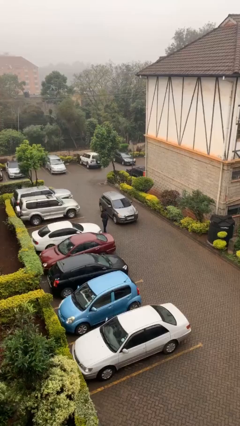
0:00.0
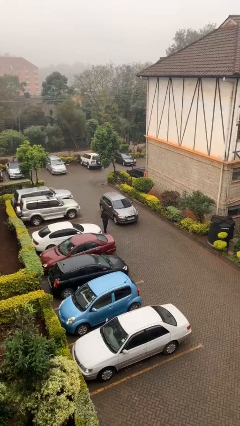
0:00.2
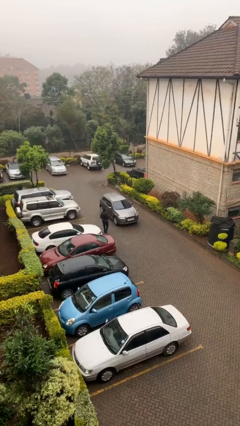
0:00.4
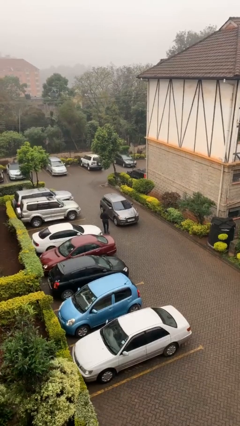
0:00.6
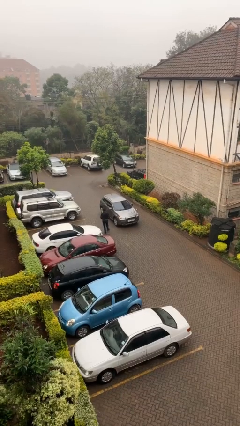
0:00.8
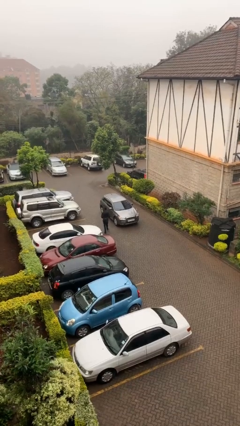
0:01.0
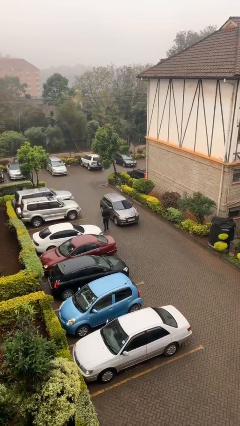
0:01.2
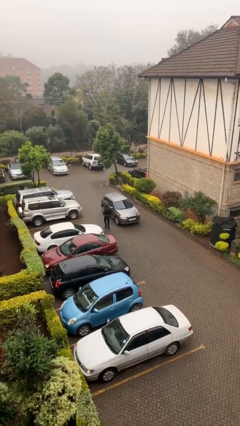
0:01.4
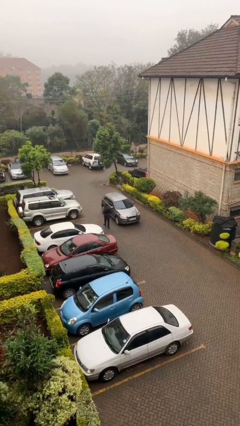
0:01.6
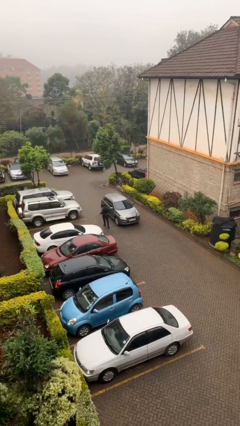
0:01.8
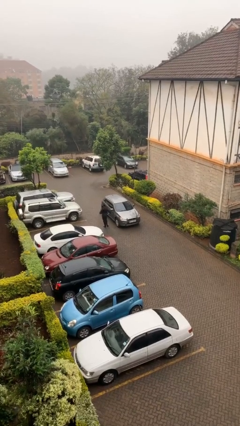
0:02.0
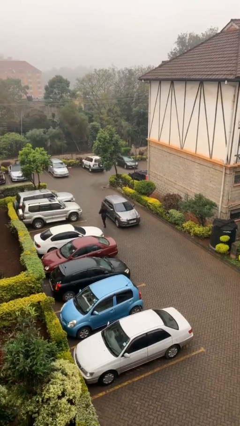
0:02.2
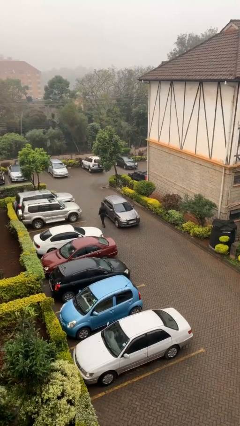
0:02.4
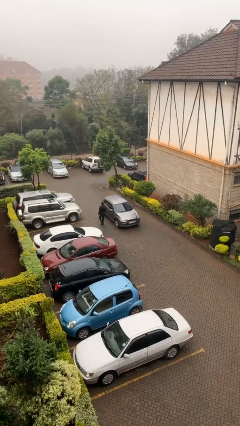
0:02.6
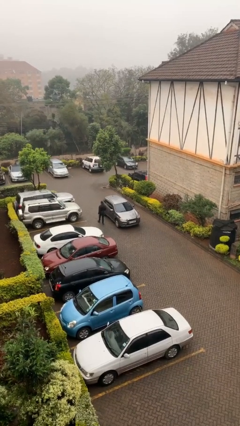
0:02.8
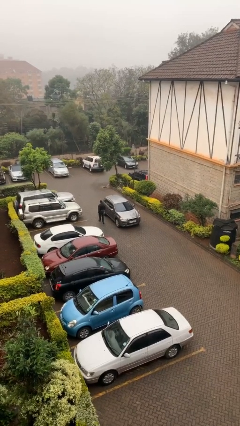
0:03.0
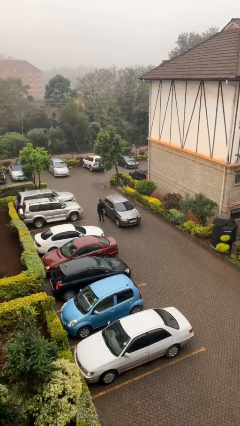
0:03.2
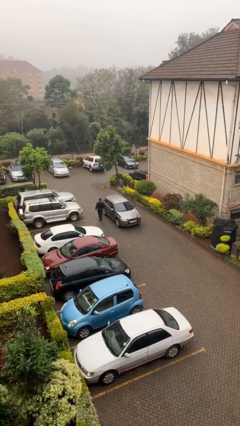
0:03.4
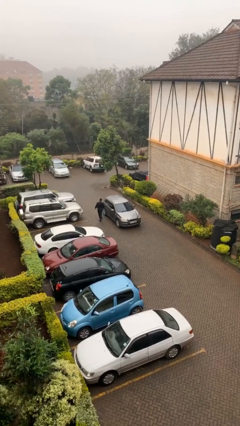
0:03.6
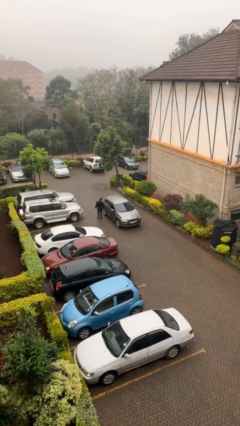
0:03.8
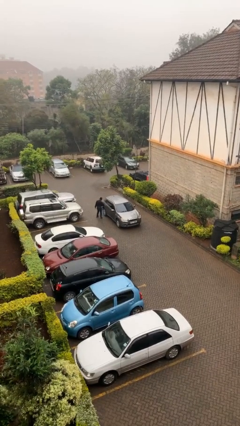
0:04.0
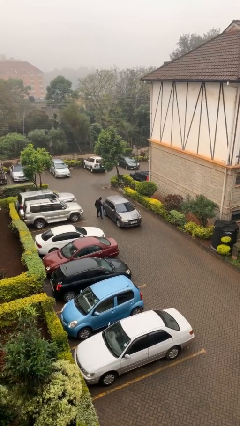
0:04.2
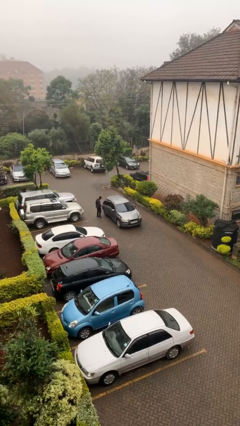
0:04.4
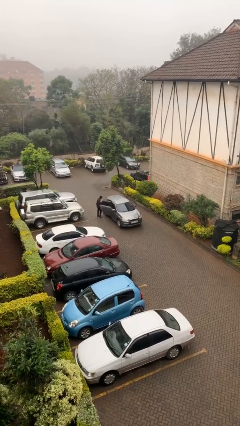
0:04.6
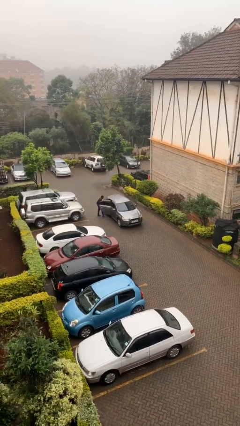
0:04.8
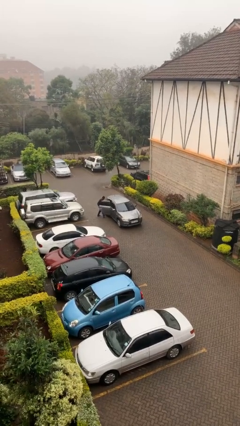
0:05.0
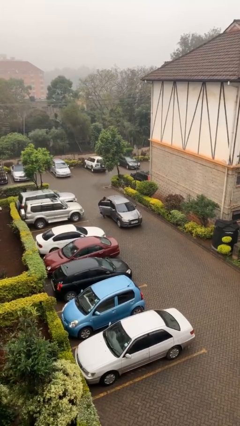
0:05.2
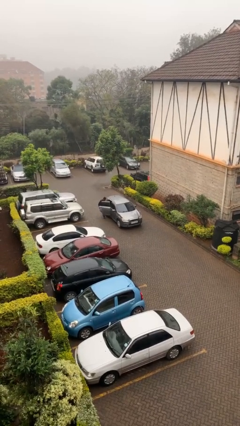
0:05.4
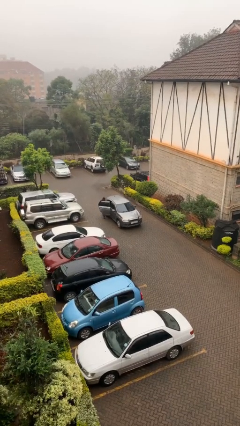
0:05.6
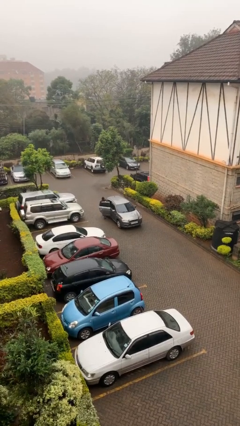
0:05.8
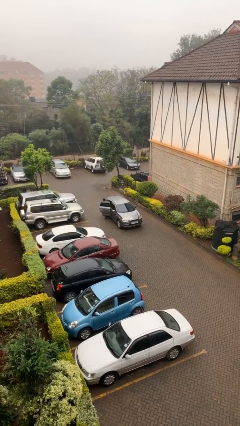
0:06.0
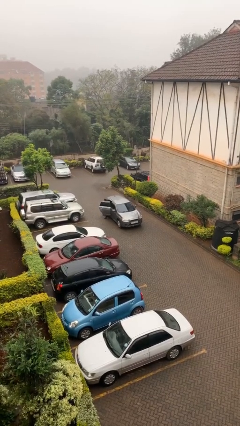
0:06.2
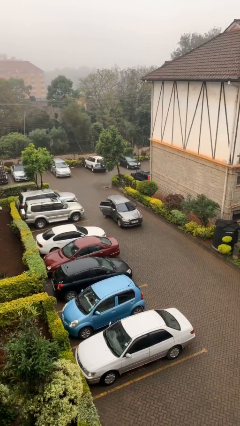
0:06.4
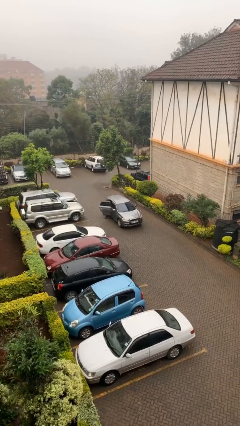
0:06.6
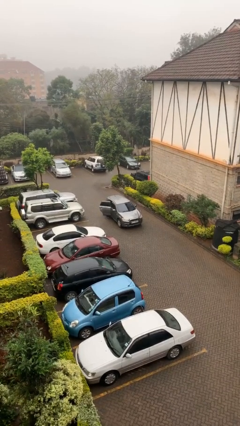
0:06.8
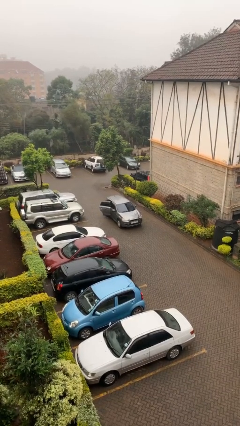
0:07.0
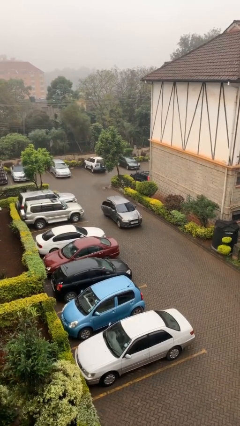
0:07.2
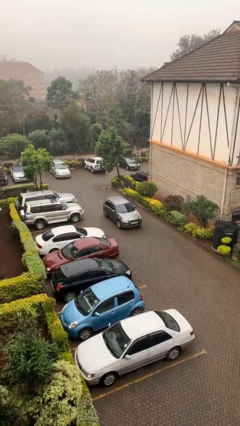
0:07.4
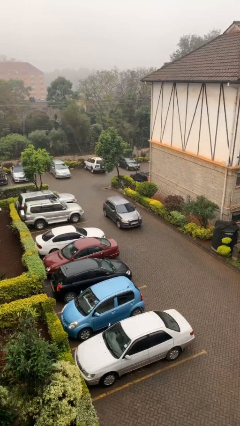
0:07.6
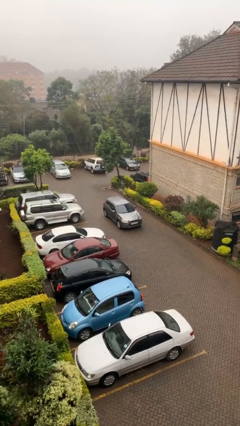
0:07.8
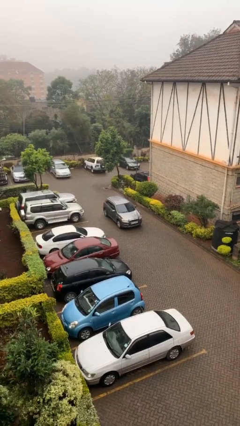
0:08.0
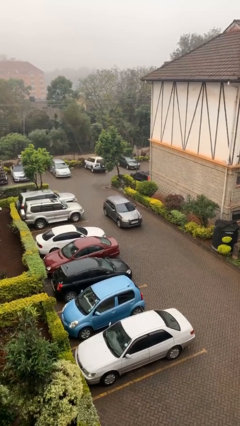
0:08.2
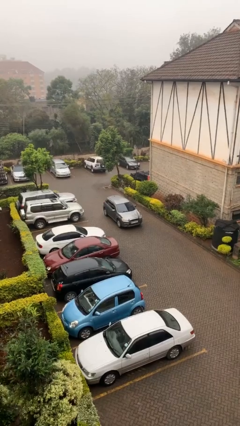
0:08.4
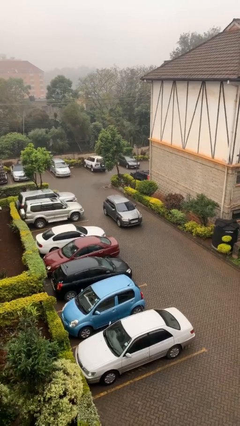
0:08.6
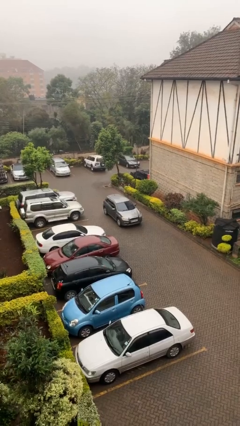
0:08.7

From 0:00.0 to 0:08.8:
car picks up person

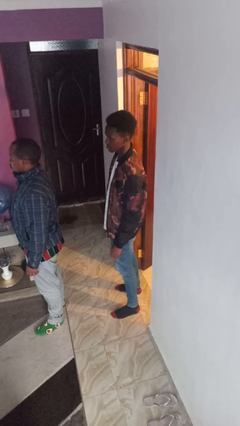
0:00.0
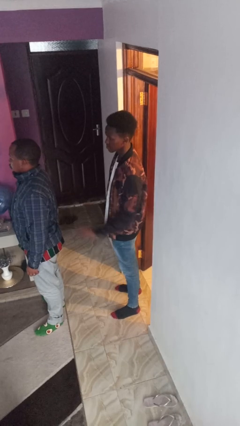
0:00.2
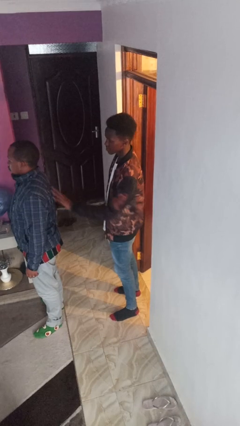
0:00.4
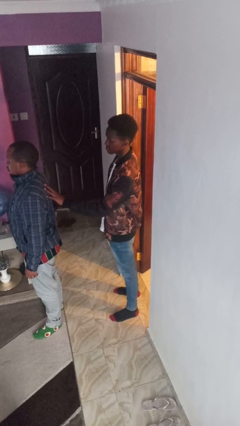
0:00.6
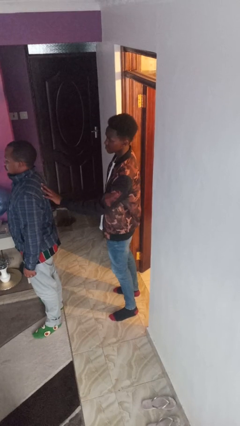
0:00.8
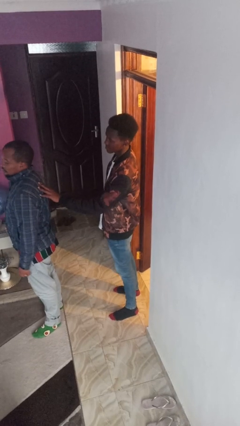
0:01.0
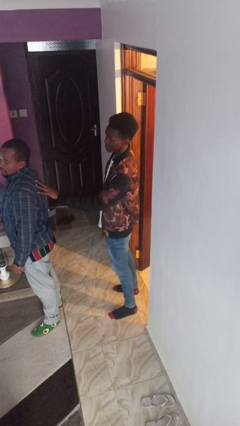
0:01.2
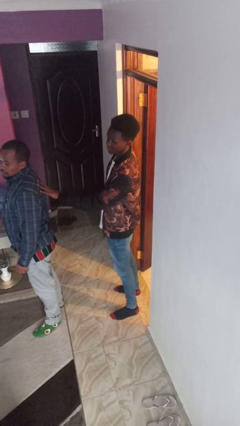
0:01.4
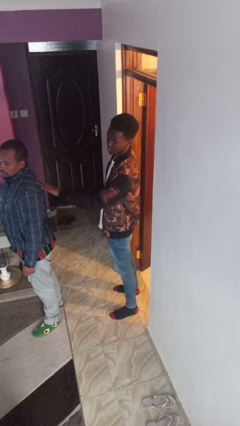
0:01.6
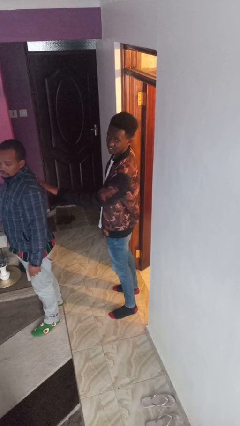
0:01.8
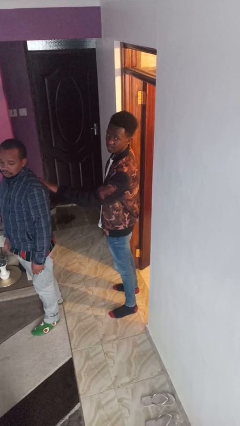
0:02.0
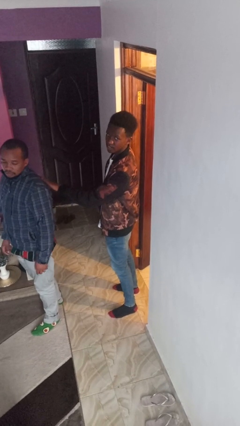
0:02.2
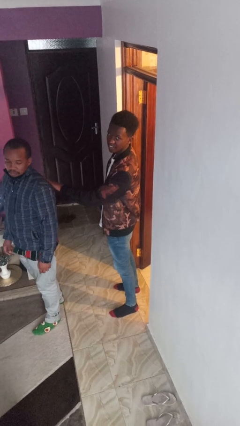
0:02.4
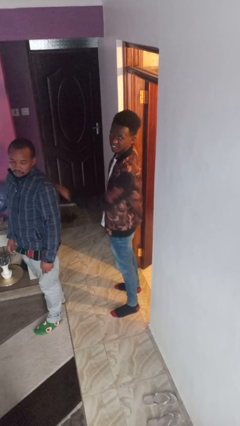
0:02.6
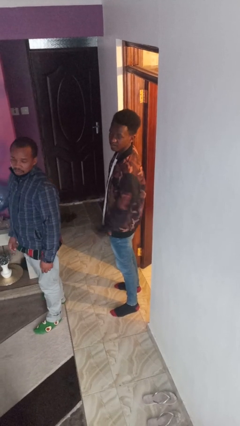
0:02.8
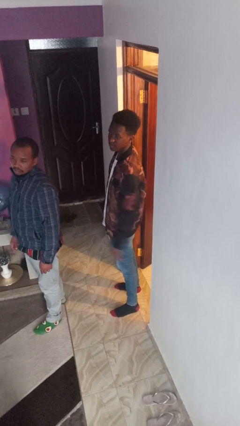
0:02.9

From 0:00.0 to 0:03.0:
person touches back of person

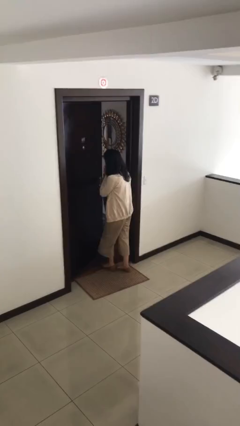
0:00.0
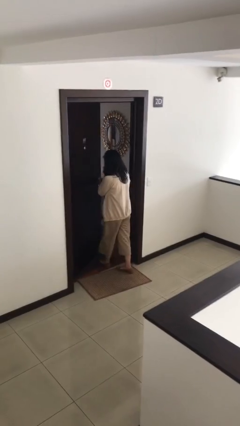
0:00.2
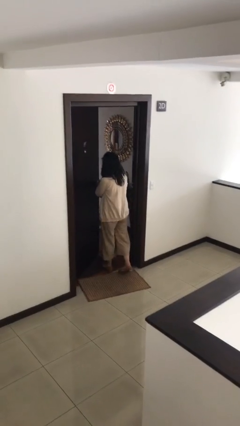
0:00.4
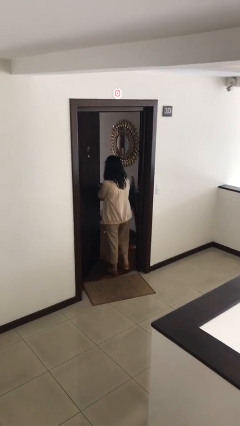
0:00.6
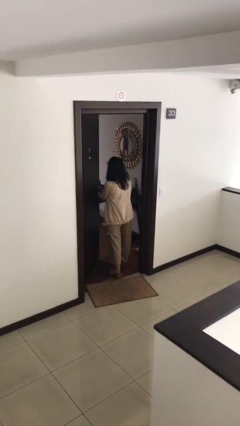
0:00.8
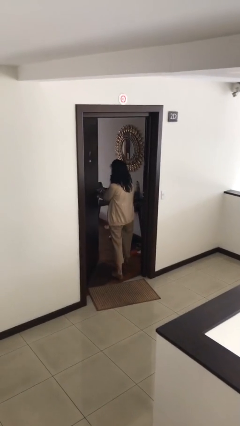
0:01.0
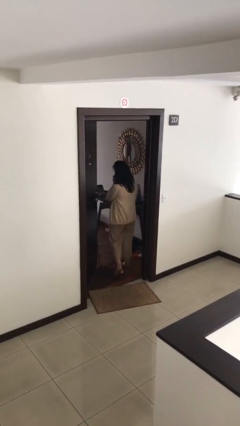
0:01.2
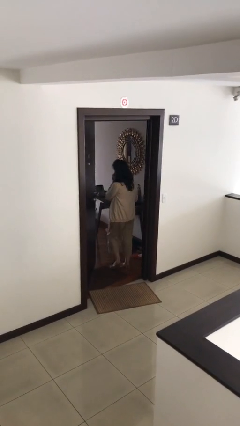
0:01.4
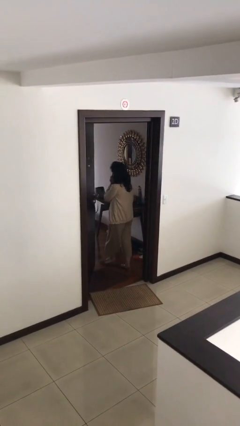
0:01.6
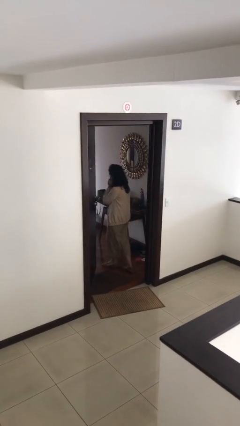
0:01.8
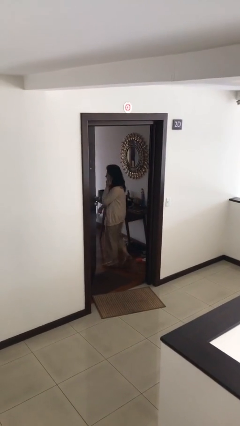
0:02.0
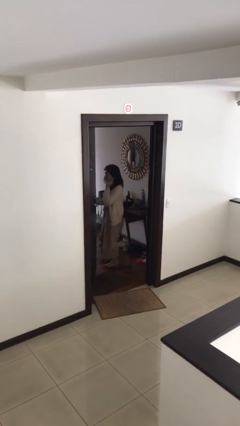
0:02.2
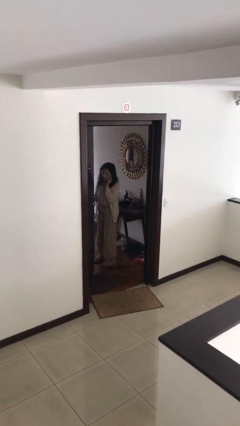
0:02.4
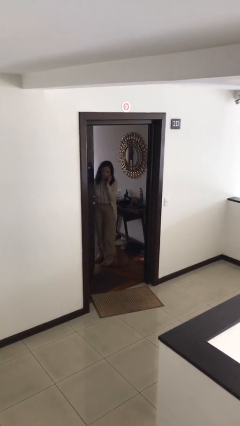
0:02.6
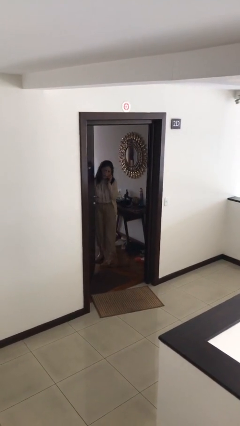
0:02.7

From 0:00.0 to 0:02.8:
person exits scene through structure

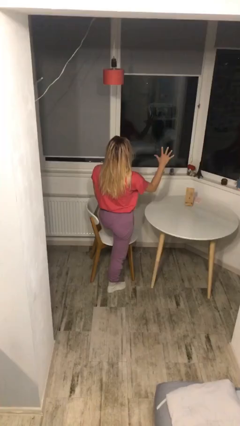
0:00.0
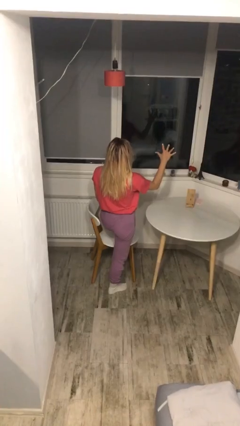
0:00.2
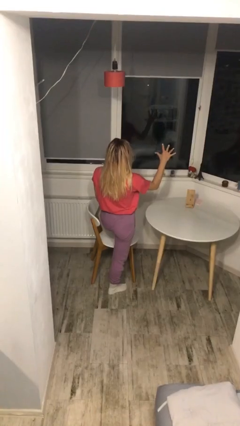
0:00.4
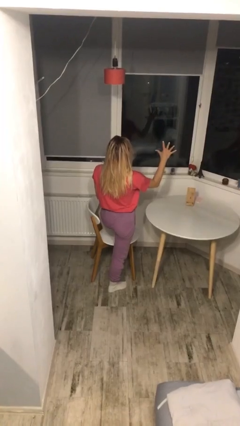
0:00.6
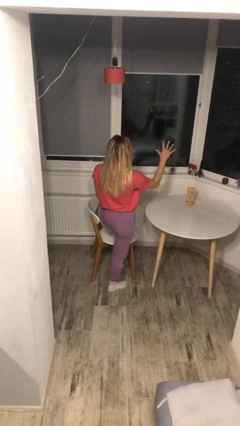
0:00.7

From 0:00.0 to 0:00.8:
person gestures number five

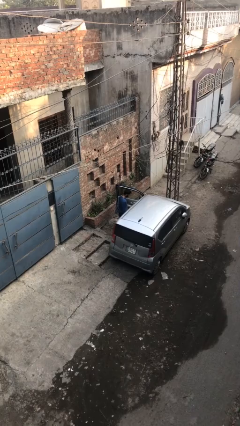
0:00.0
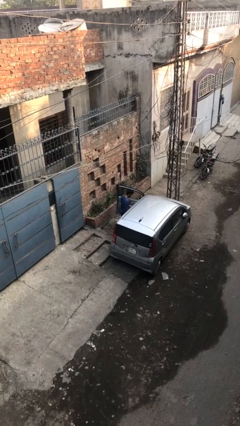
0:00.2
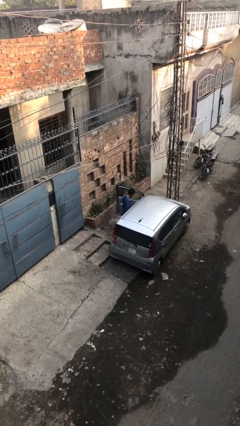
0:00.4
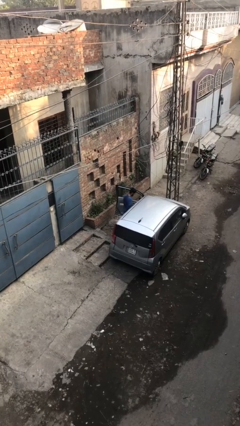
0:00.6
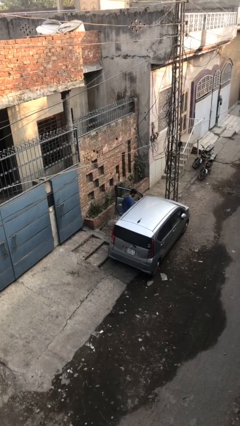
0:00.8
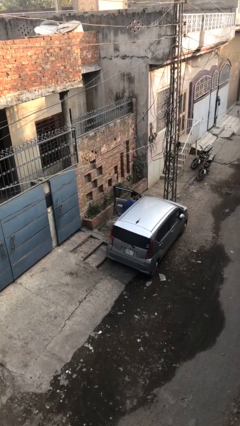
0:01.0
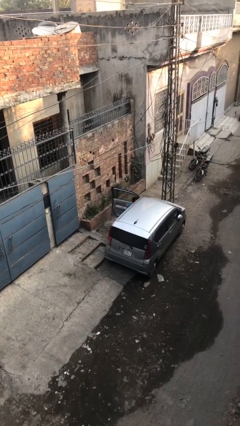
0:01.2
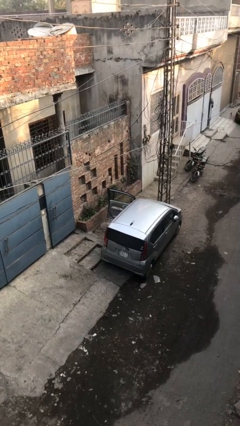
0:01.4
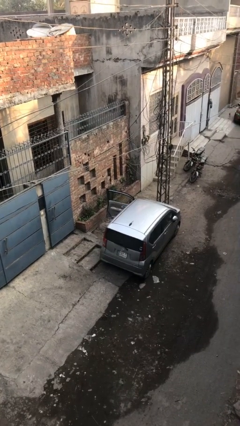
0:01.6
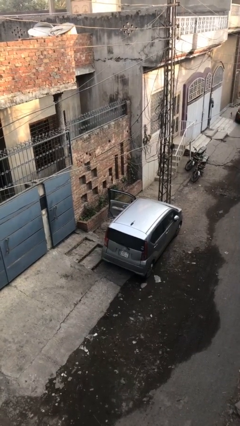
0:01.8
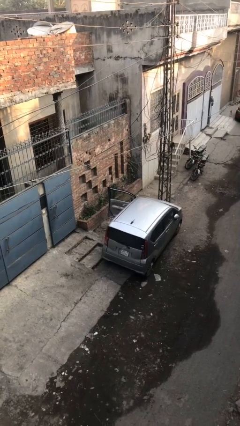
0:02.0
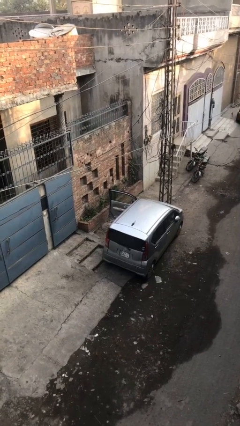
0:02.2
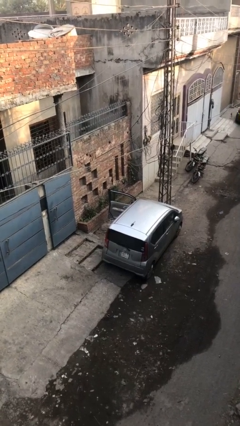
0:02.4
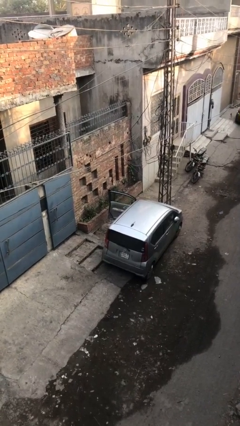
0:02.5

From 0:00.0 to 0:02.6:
person enters car
